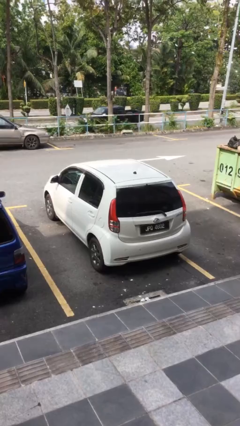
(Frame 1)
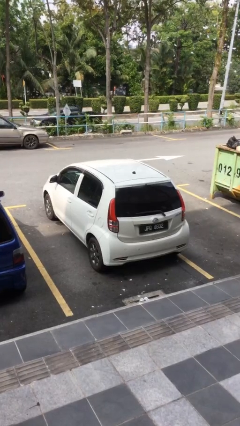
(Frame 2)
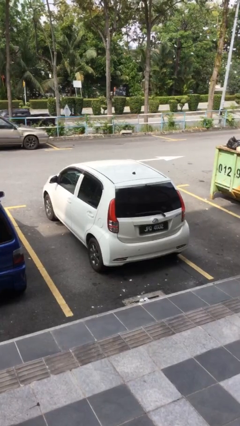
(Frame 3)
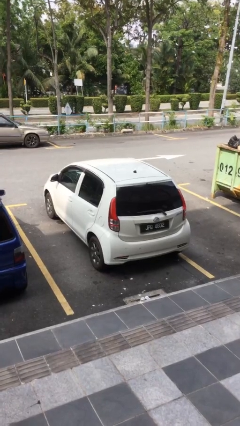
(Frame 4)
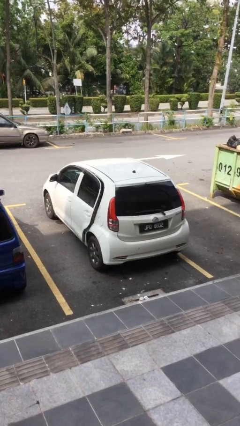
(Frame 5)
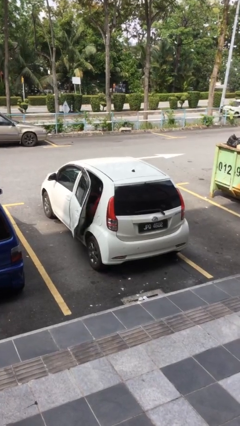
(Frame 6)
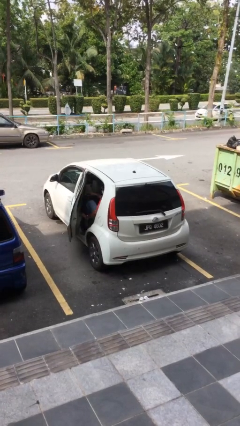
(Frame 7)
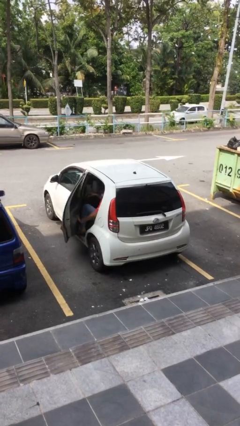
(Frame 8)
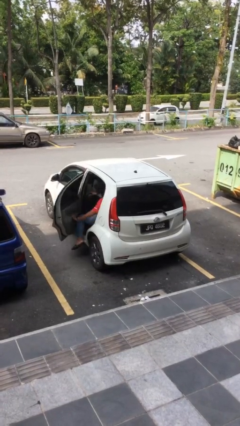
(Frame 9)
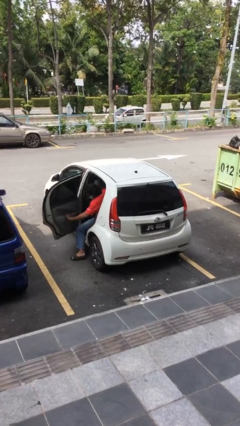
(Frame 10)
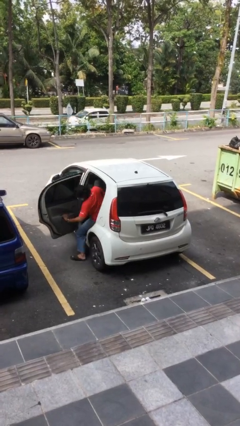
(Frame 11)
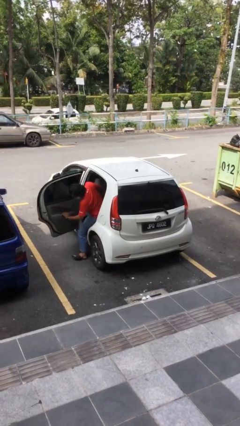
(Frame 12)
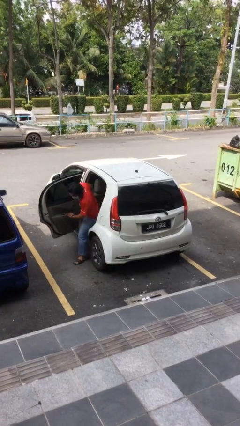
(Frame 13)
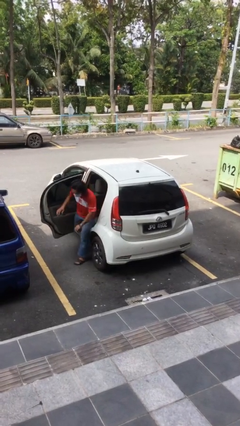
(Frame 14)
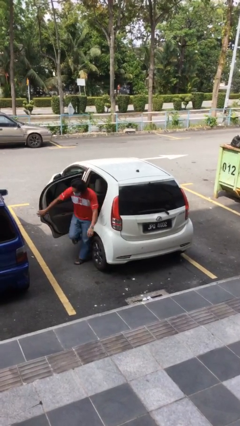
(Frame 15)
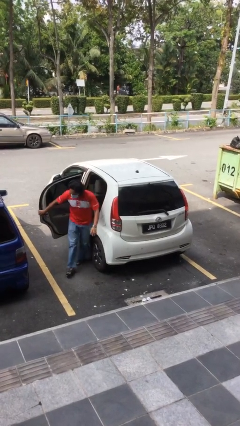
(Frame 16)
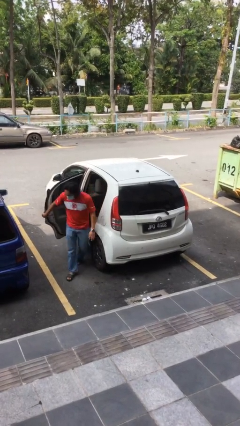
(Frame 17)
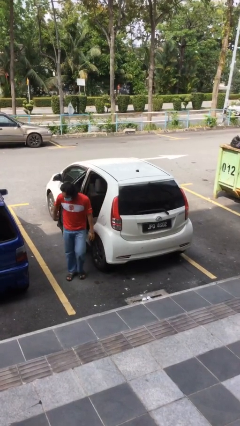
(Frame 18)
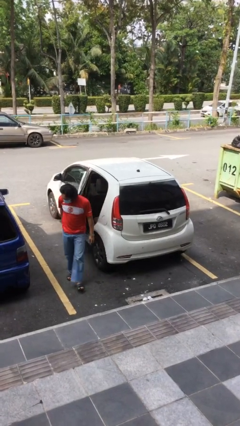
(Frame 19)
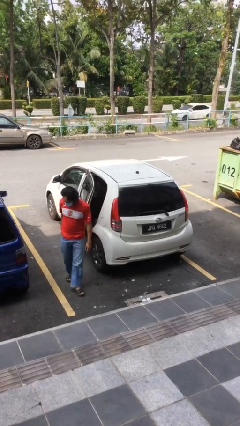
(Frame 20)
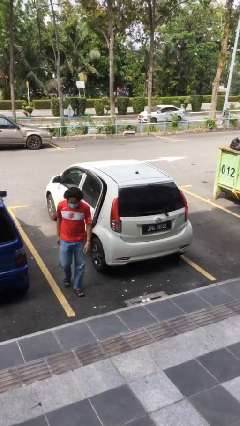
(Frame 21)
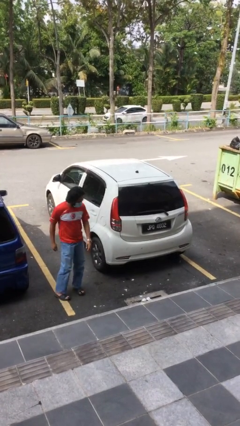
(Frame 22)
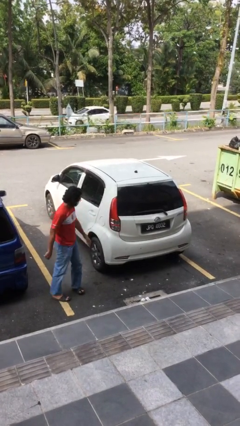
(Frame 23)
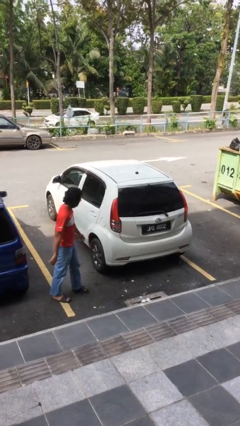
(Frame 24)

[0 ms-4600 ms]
car drops off person

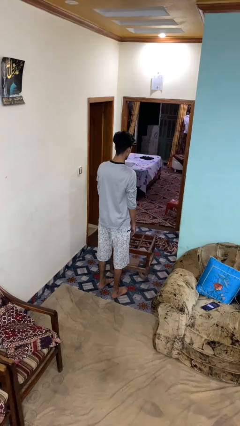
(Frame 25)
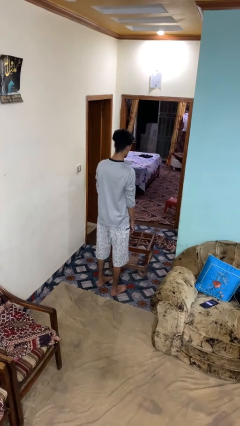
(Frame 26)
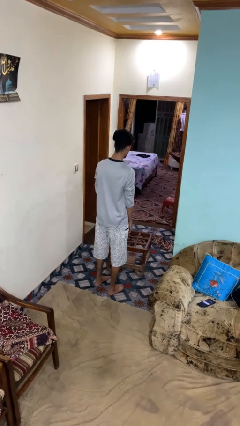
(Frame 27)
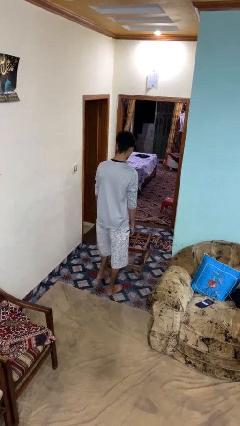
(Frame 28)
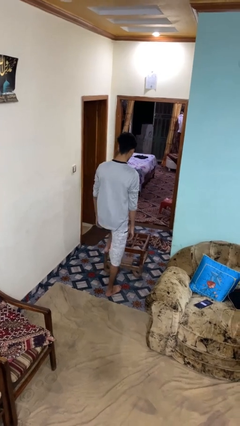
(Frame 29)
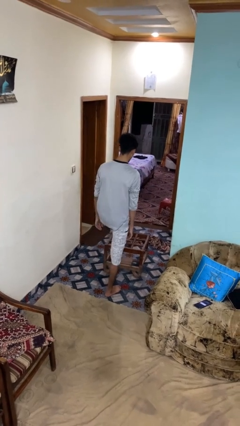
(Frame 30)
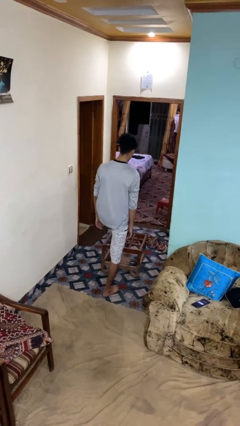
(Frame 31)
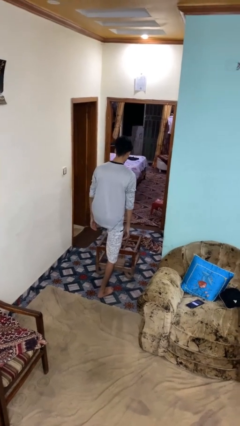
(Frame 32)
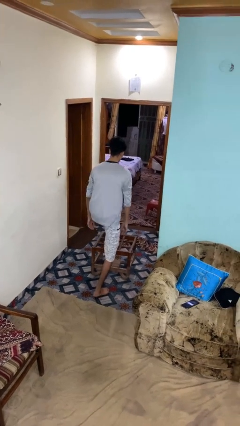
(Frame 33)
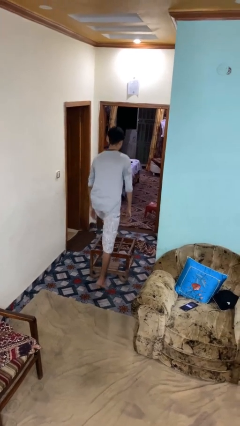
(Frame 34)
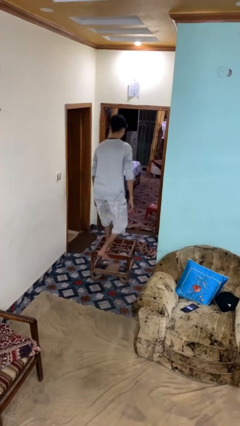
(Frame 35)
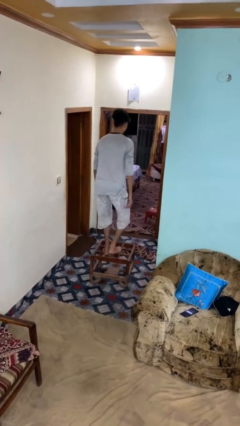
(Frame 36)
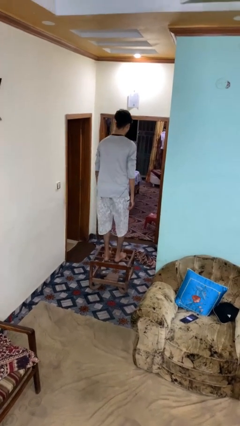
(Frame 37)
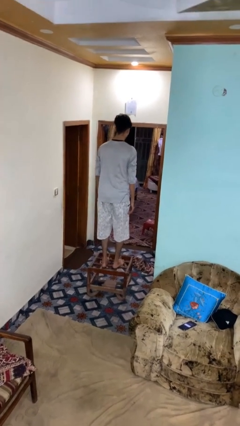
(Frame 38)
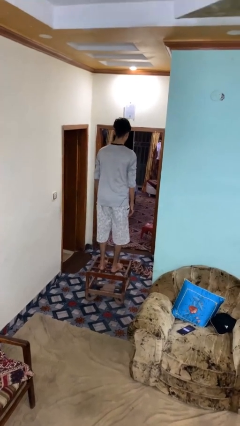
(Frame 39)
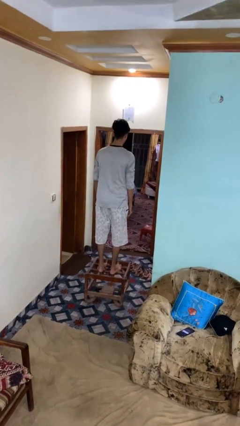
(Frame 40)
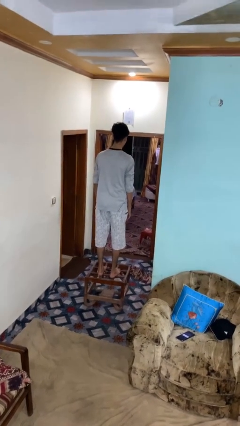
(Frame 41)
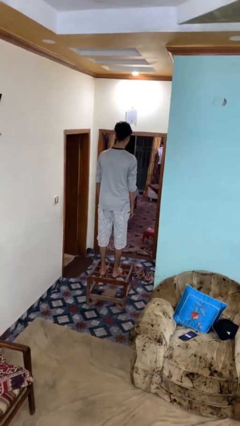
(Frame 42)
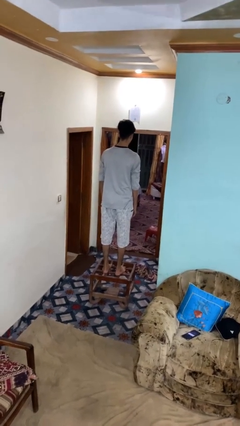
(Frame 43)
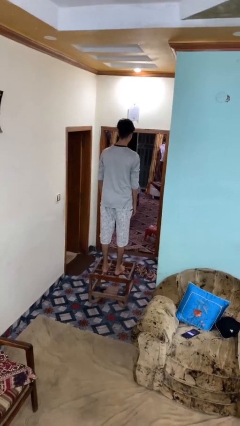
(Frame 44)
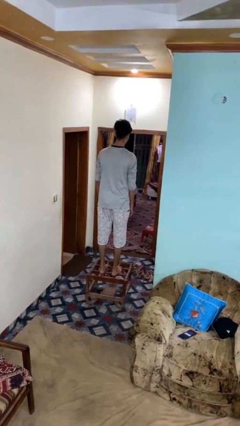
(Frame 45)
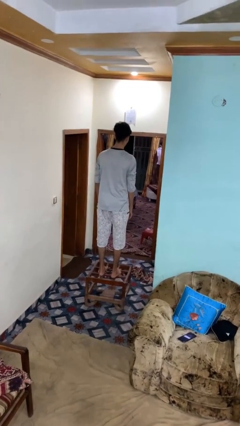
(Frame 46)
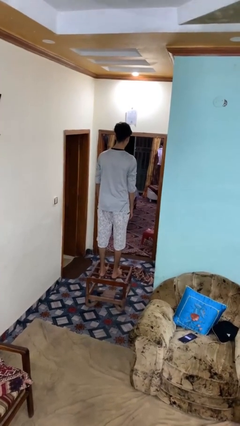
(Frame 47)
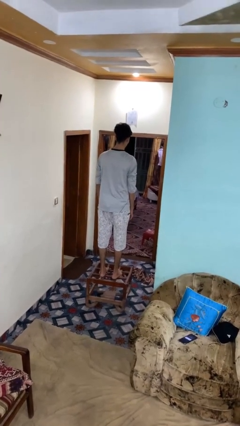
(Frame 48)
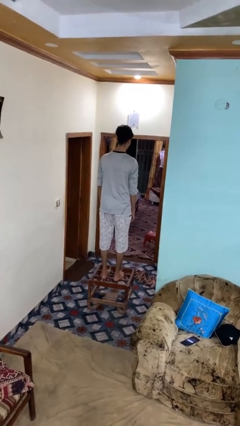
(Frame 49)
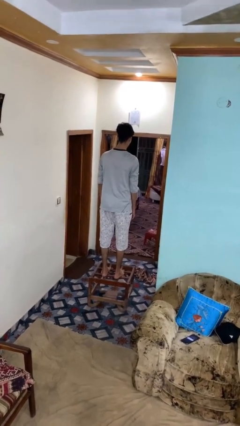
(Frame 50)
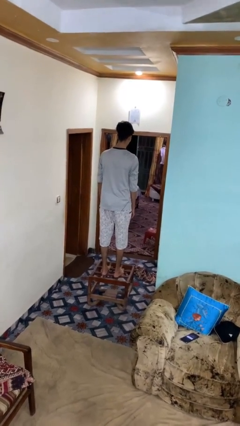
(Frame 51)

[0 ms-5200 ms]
person climbs on table

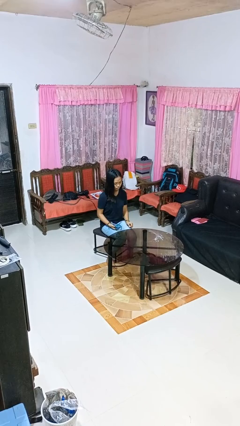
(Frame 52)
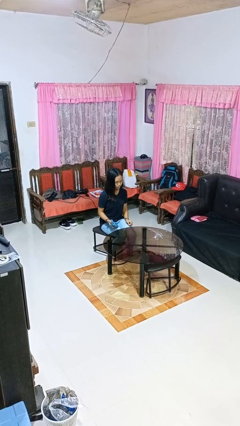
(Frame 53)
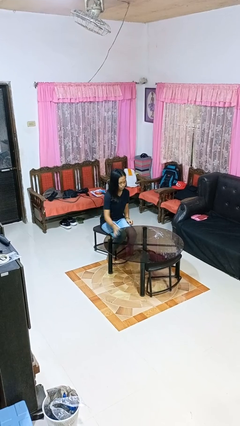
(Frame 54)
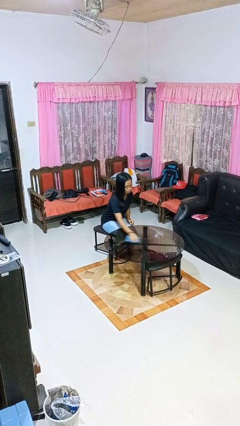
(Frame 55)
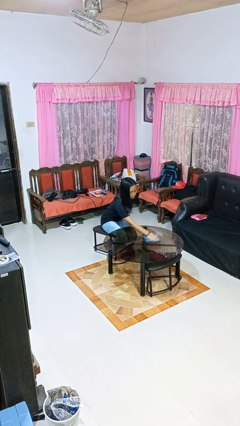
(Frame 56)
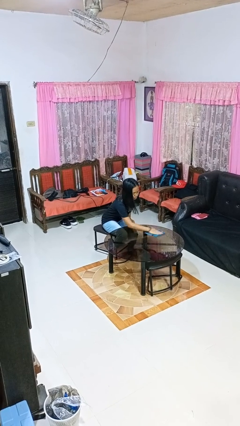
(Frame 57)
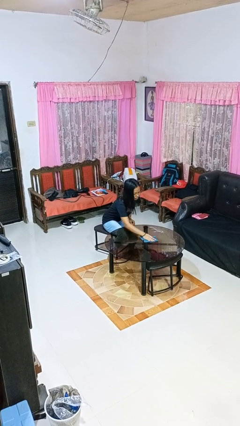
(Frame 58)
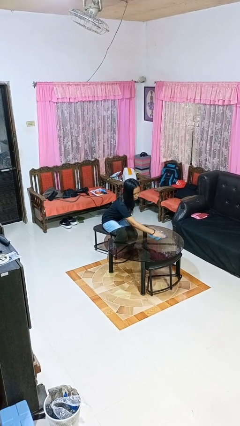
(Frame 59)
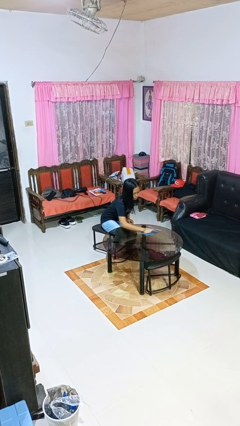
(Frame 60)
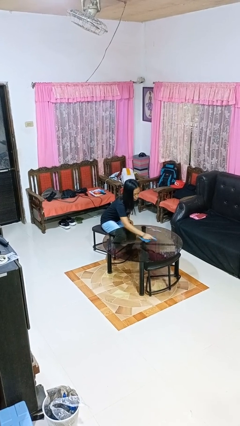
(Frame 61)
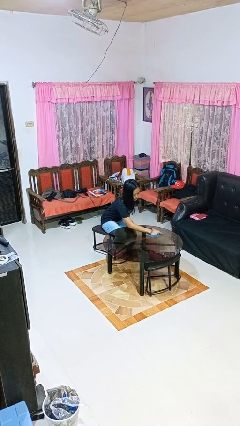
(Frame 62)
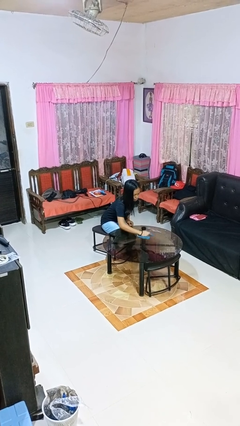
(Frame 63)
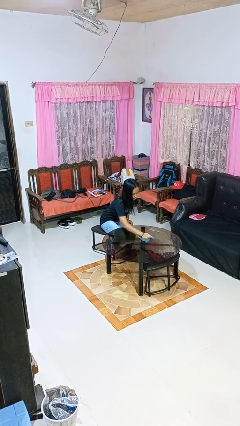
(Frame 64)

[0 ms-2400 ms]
person cleans table with rag

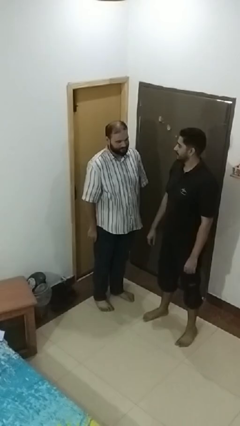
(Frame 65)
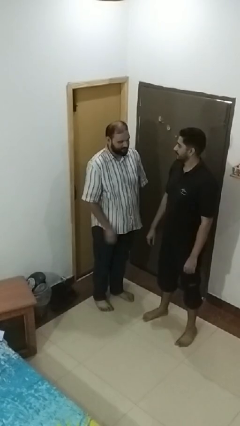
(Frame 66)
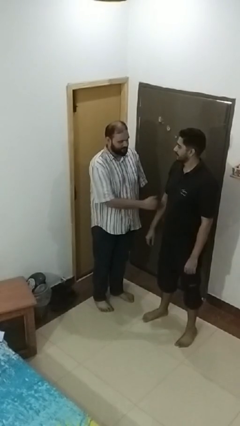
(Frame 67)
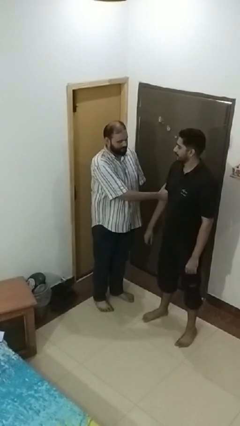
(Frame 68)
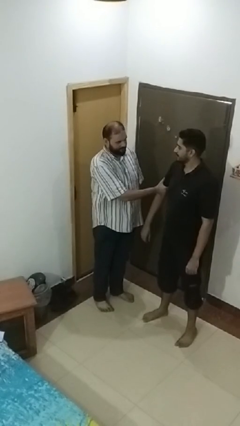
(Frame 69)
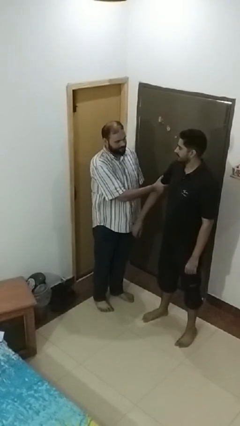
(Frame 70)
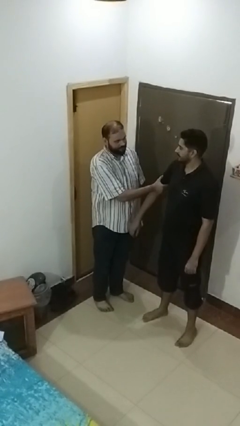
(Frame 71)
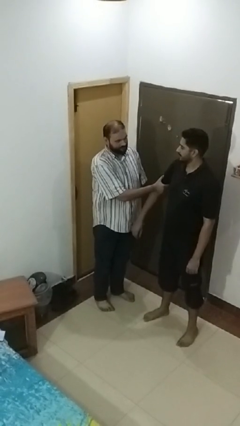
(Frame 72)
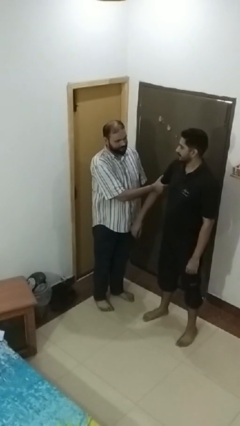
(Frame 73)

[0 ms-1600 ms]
person grabs person by bicep

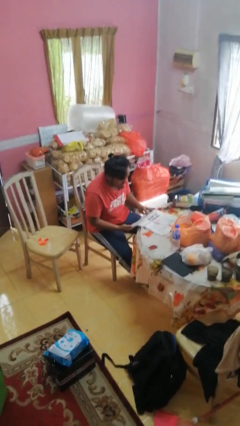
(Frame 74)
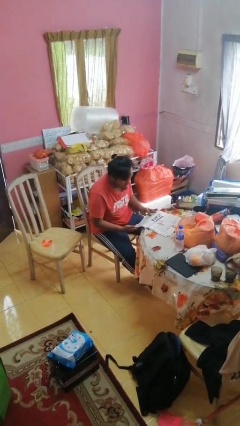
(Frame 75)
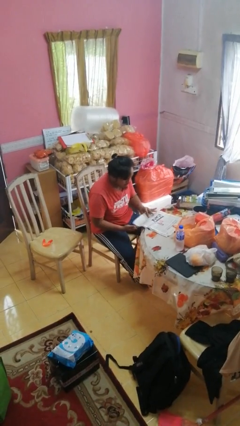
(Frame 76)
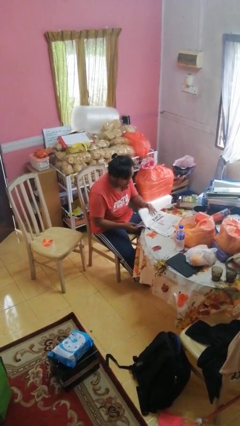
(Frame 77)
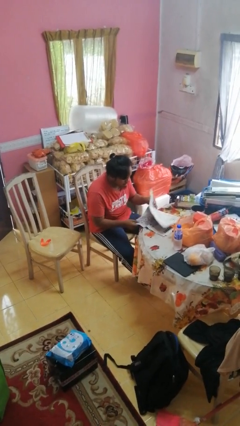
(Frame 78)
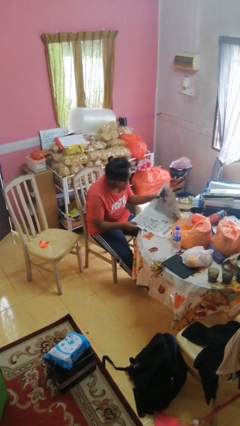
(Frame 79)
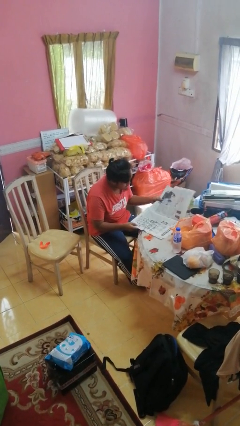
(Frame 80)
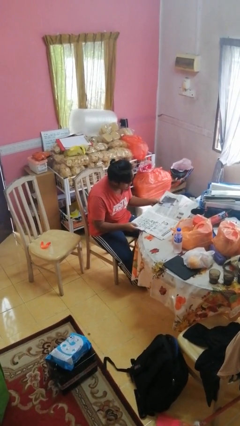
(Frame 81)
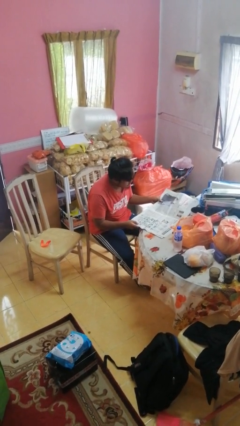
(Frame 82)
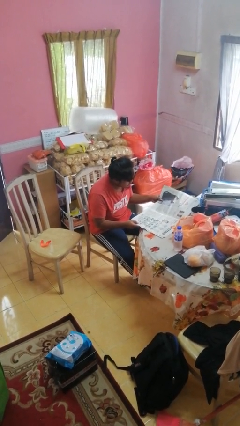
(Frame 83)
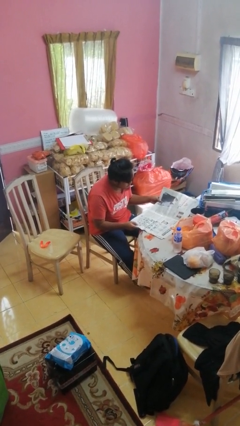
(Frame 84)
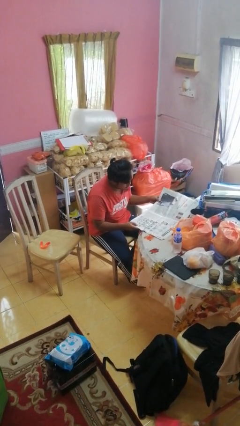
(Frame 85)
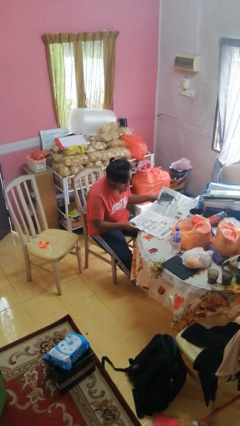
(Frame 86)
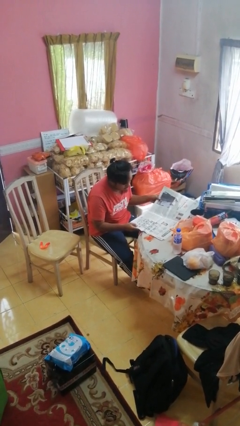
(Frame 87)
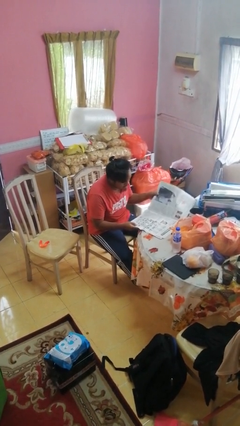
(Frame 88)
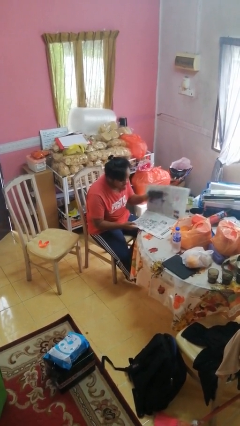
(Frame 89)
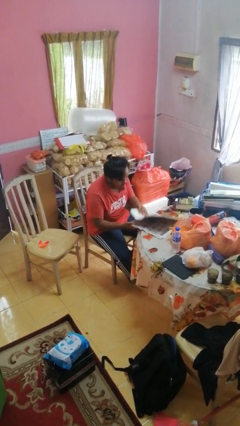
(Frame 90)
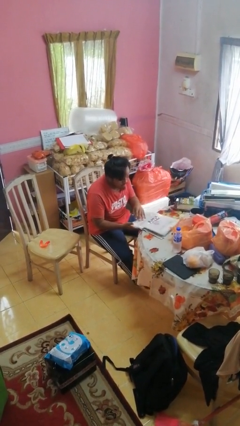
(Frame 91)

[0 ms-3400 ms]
person reads newspaper

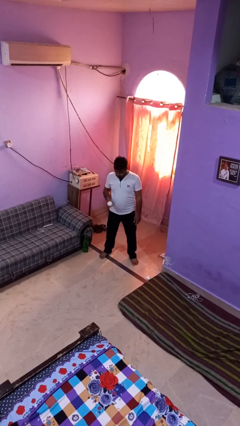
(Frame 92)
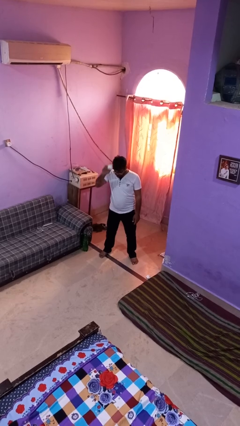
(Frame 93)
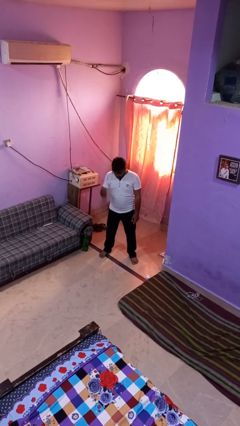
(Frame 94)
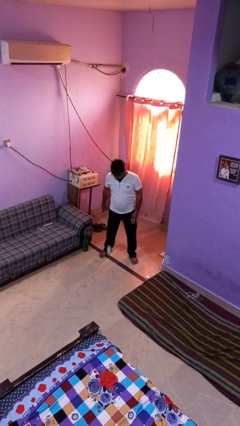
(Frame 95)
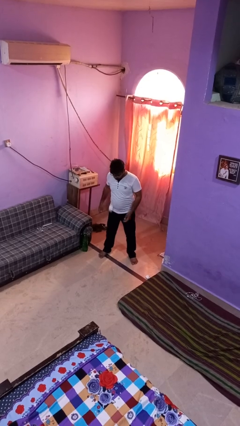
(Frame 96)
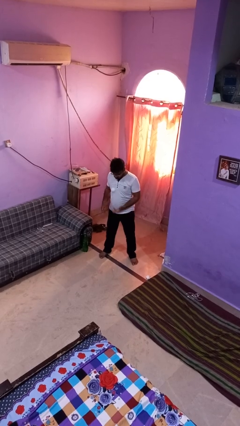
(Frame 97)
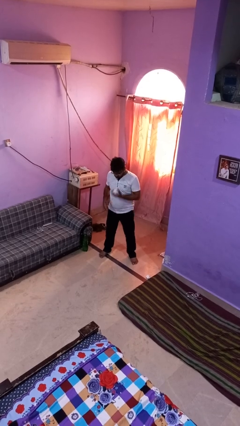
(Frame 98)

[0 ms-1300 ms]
person bounces ball on floor
